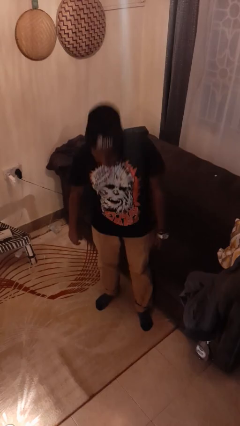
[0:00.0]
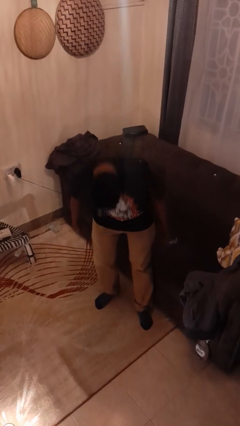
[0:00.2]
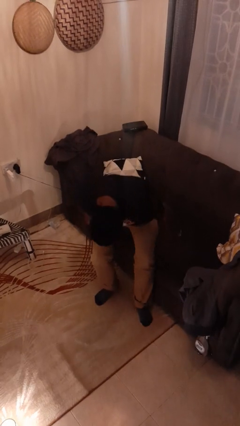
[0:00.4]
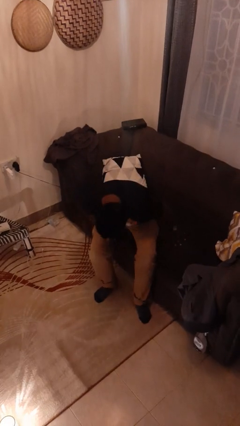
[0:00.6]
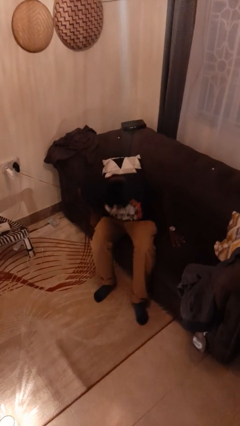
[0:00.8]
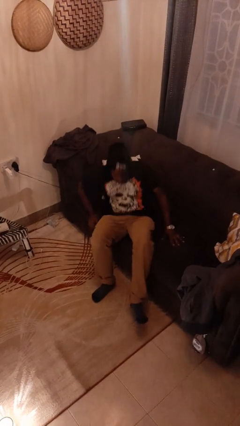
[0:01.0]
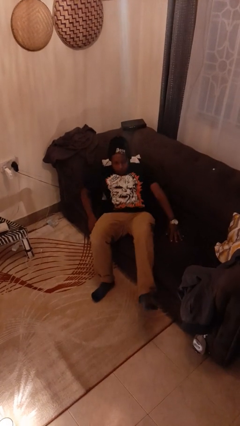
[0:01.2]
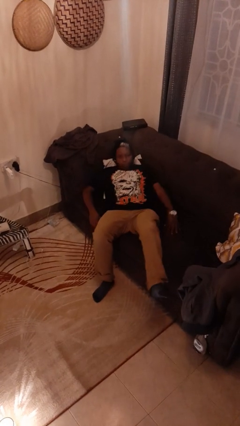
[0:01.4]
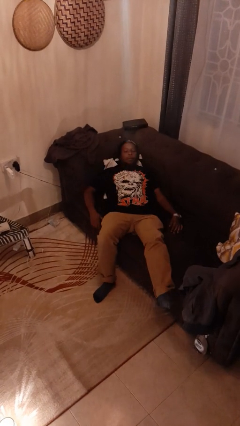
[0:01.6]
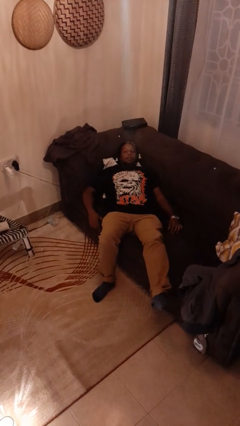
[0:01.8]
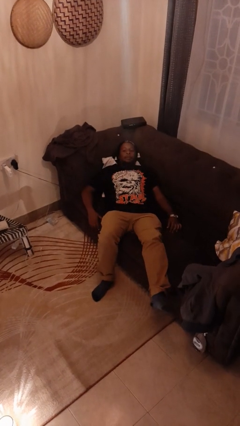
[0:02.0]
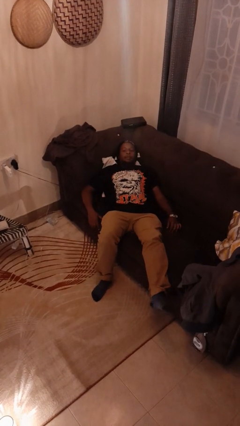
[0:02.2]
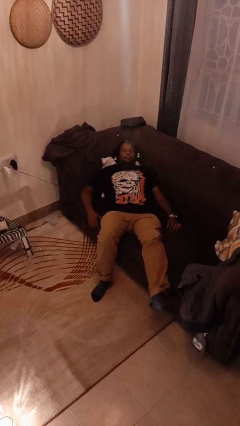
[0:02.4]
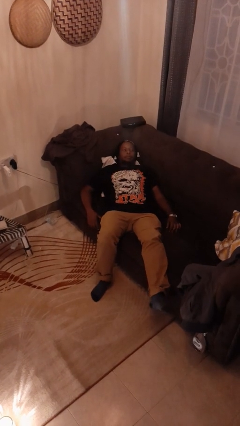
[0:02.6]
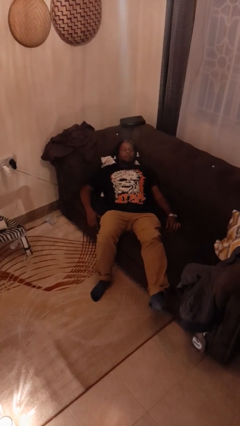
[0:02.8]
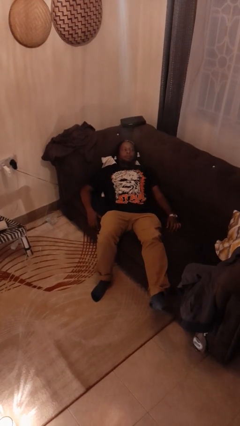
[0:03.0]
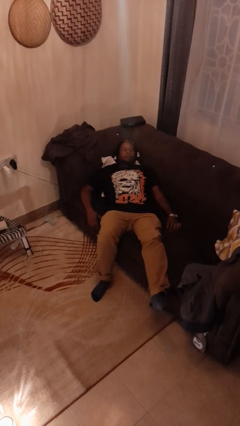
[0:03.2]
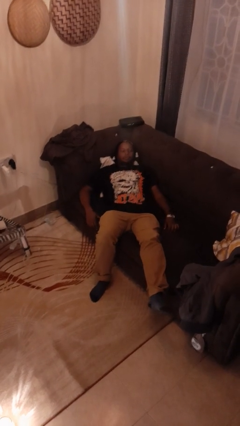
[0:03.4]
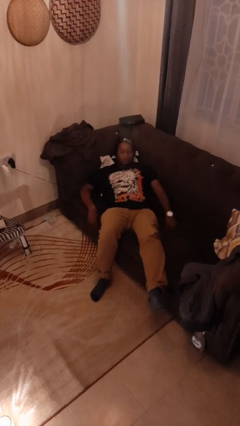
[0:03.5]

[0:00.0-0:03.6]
person lies down on couch

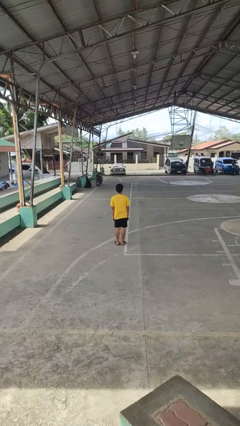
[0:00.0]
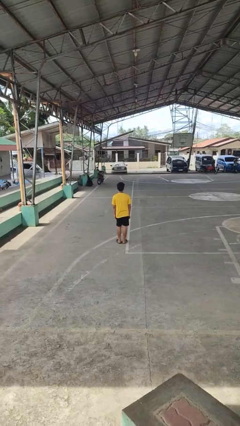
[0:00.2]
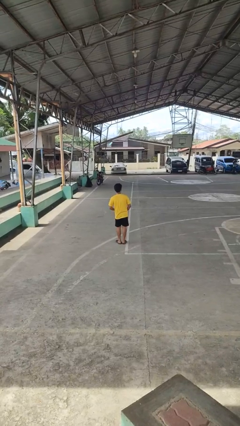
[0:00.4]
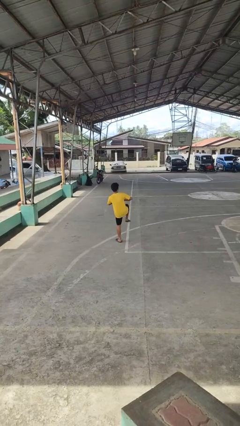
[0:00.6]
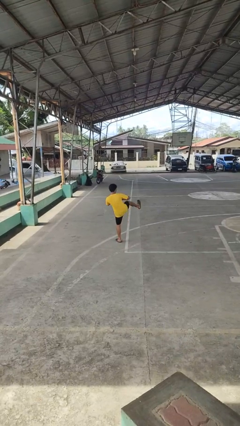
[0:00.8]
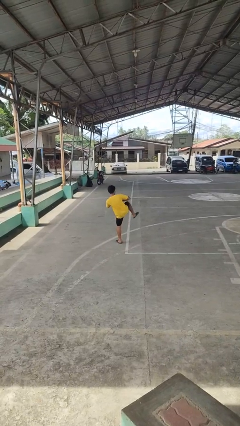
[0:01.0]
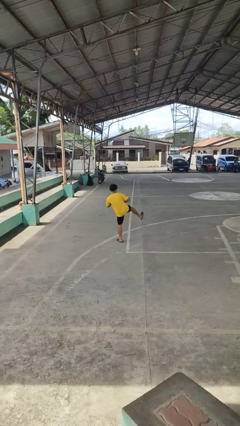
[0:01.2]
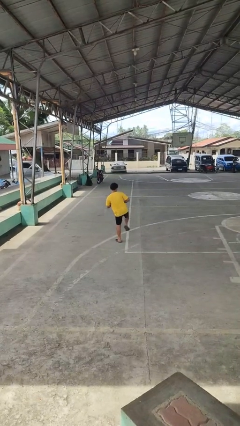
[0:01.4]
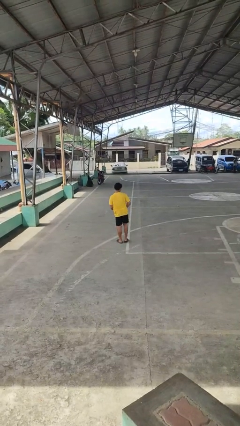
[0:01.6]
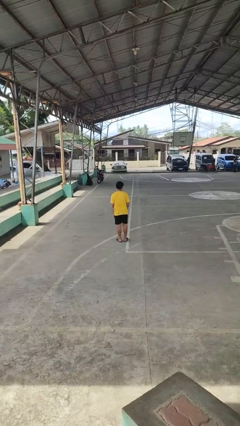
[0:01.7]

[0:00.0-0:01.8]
person karate kicks

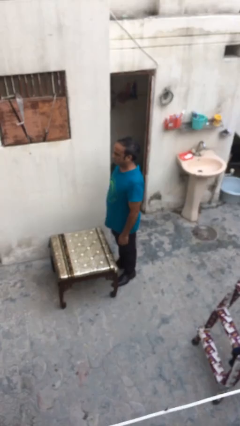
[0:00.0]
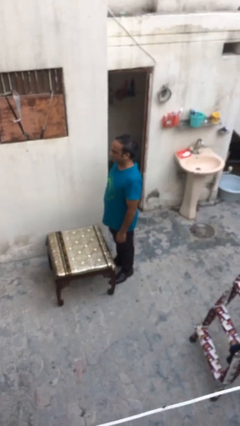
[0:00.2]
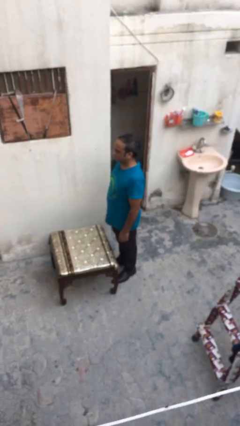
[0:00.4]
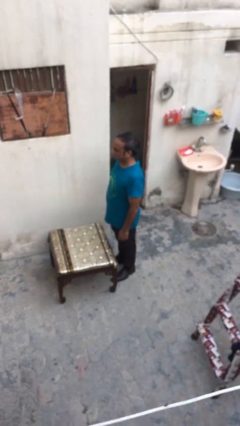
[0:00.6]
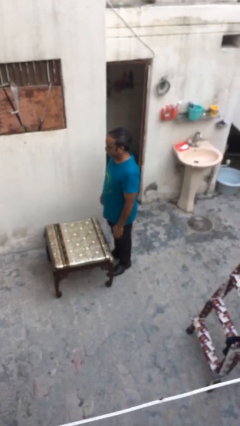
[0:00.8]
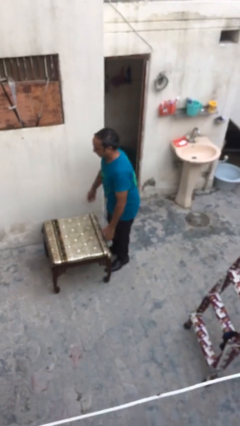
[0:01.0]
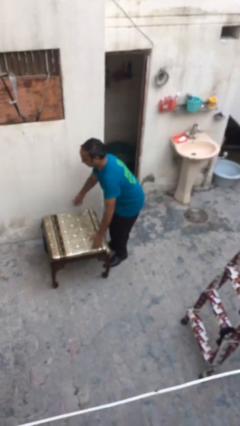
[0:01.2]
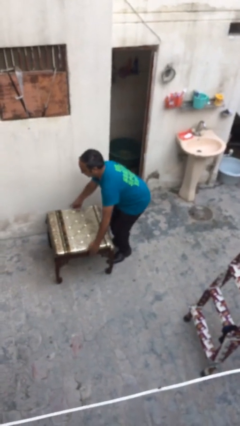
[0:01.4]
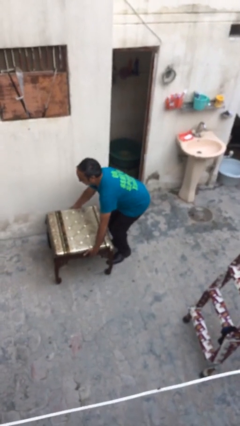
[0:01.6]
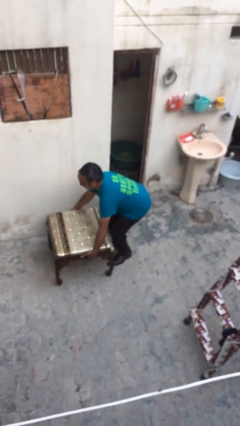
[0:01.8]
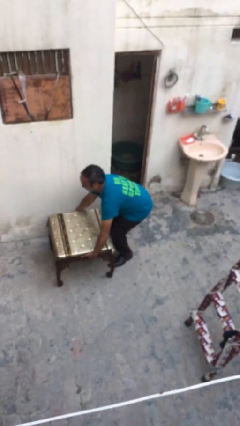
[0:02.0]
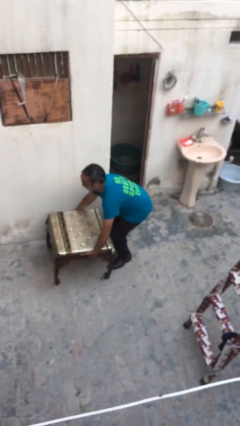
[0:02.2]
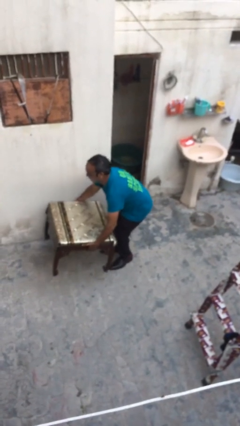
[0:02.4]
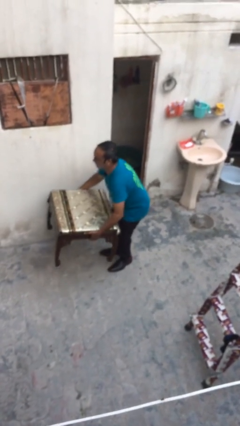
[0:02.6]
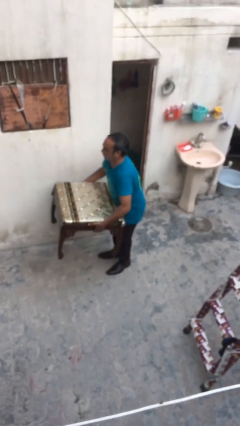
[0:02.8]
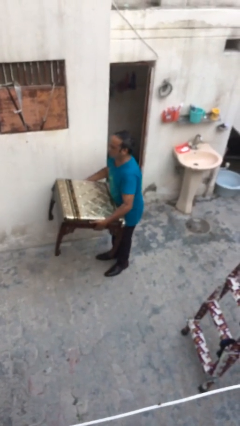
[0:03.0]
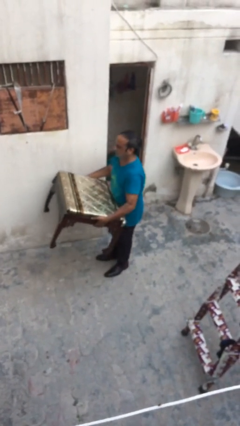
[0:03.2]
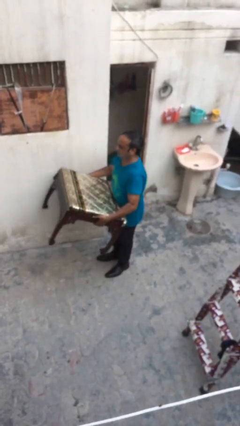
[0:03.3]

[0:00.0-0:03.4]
person picks up object from floor

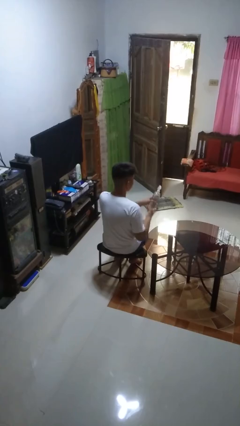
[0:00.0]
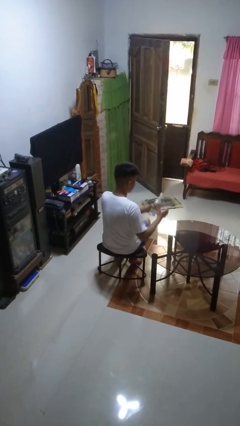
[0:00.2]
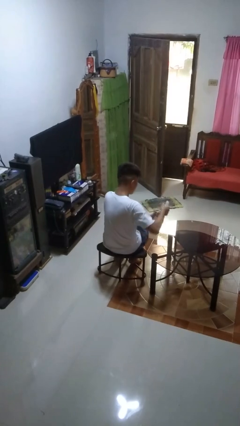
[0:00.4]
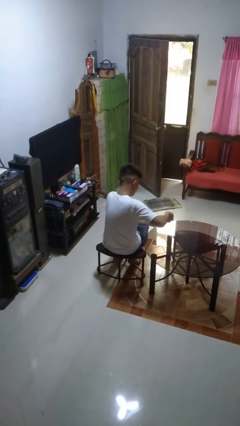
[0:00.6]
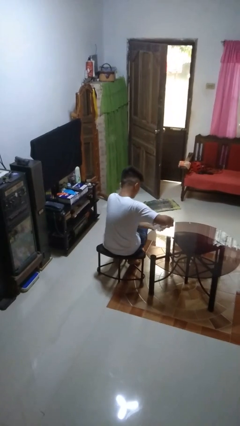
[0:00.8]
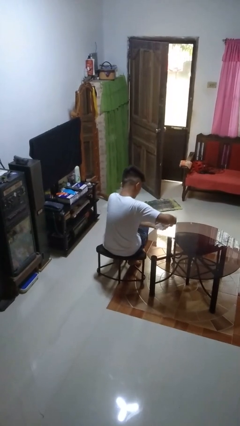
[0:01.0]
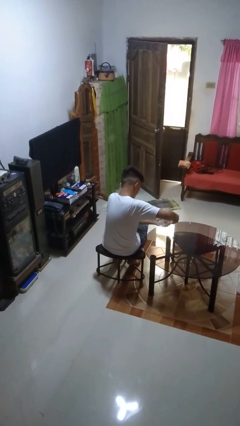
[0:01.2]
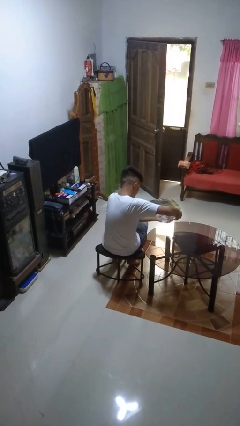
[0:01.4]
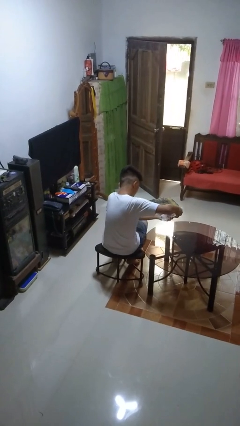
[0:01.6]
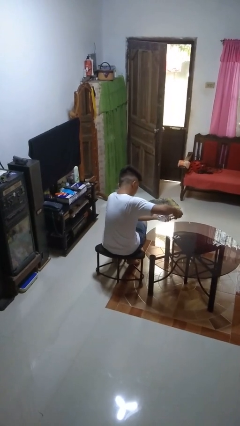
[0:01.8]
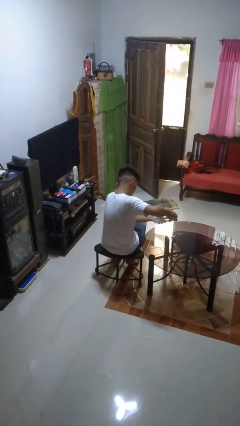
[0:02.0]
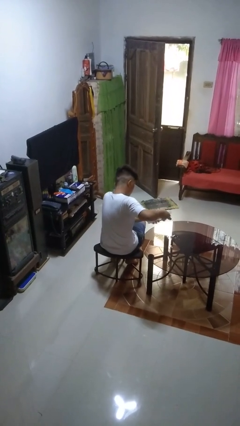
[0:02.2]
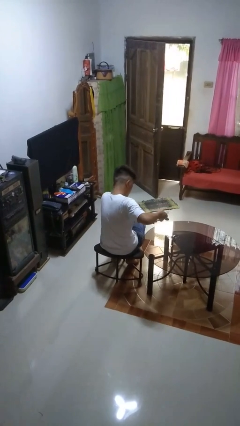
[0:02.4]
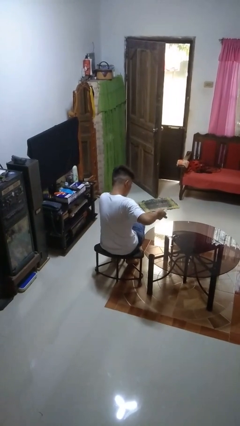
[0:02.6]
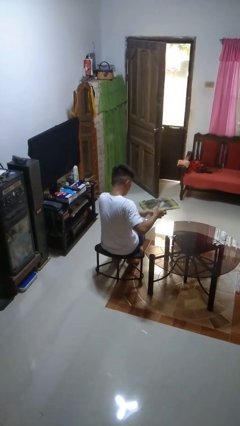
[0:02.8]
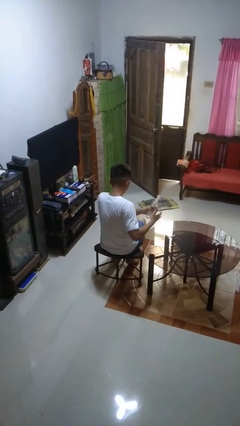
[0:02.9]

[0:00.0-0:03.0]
person sprays from bottle

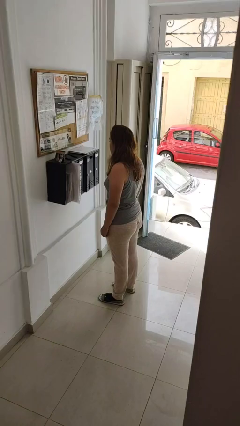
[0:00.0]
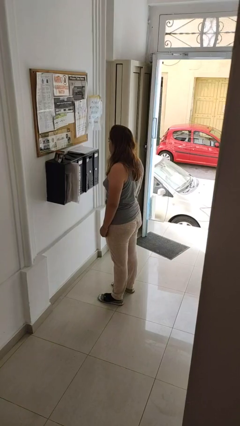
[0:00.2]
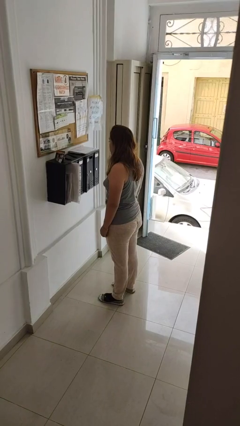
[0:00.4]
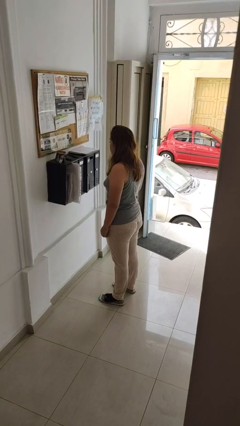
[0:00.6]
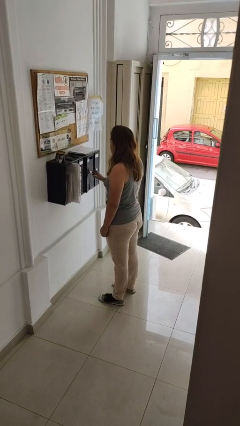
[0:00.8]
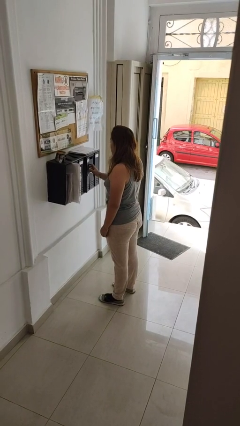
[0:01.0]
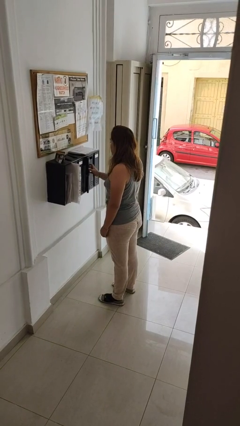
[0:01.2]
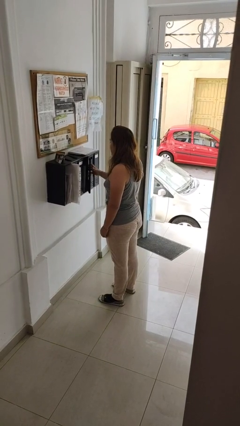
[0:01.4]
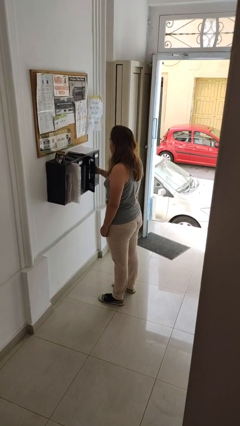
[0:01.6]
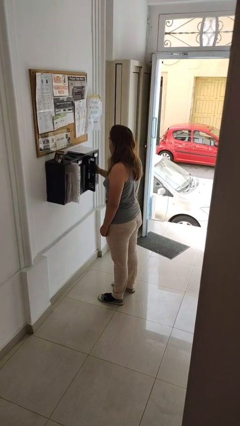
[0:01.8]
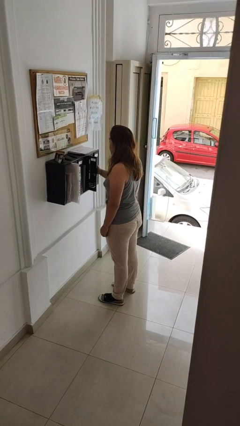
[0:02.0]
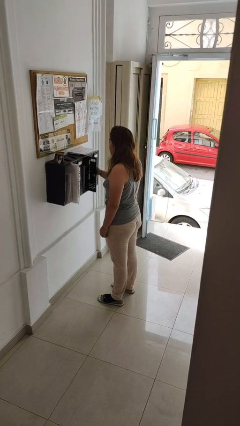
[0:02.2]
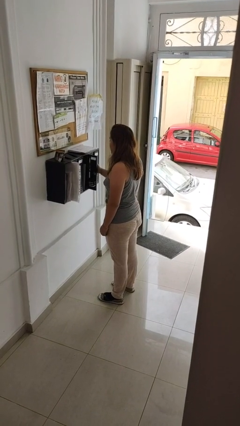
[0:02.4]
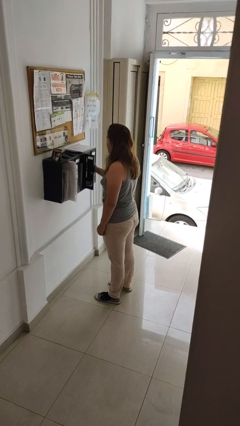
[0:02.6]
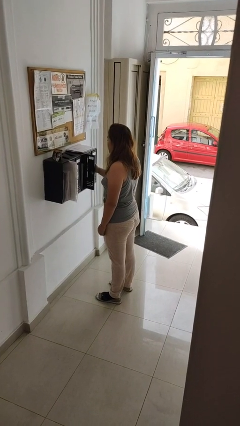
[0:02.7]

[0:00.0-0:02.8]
person opens mailbox

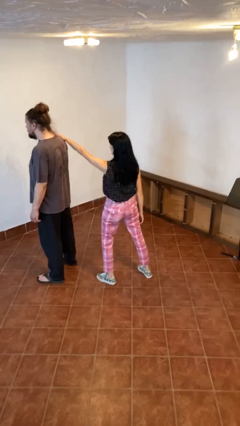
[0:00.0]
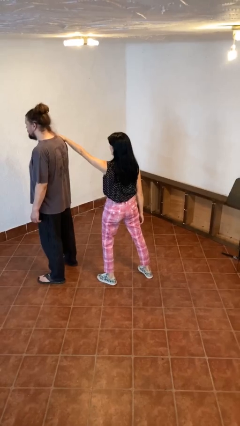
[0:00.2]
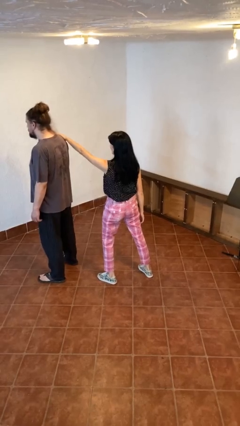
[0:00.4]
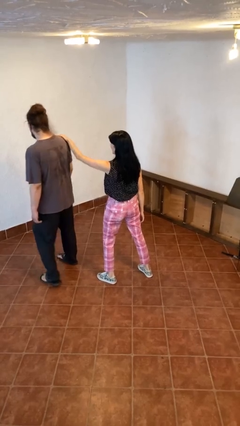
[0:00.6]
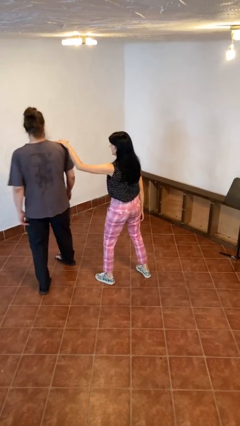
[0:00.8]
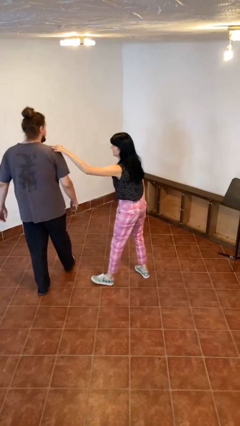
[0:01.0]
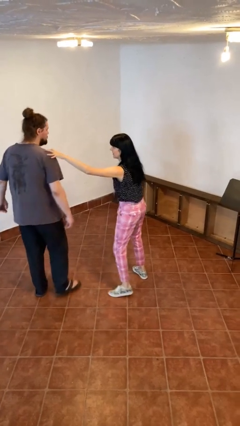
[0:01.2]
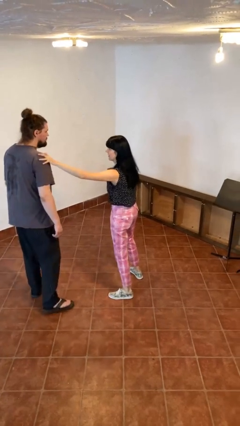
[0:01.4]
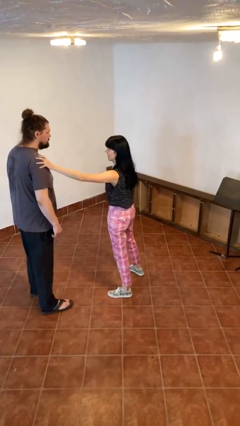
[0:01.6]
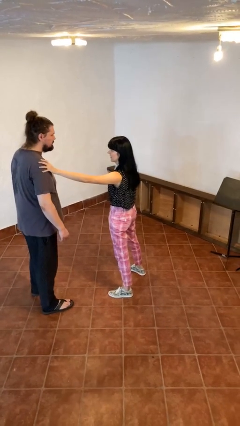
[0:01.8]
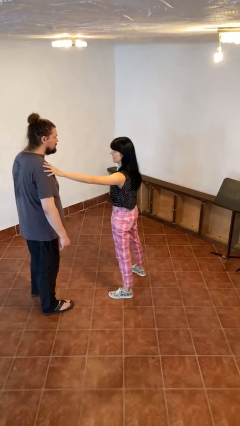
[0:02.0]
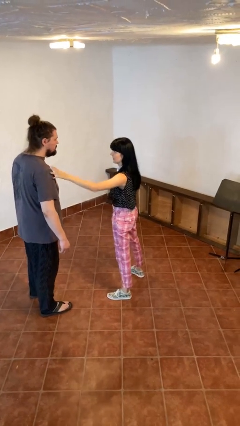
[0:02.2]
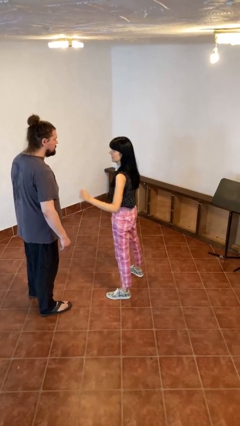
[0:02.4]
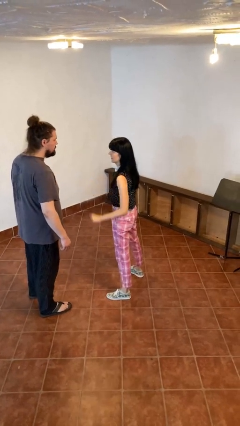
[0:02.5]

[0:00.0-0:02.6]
person spins person around
